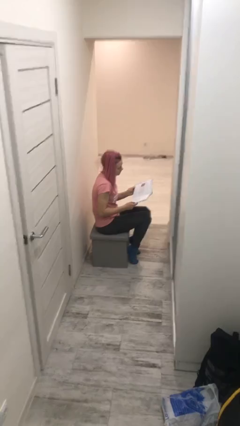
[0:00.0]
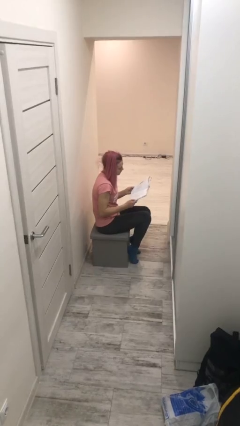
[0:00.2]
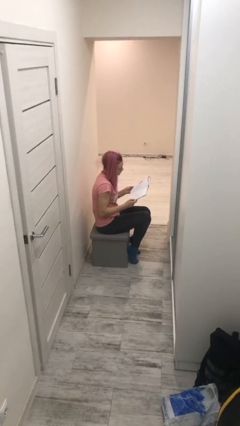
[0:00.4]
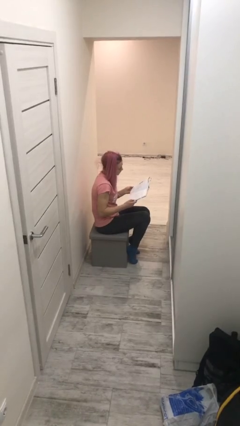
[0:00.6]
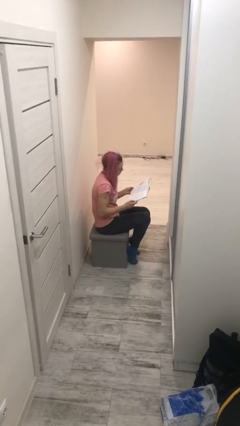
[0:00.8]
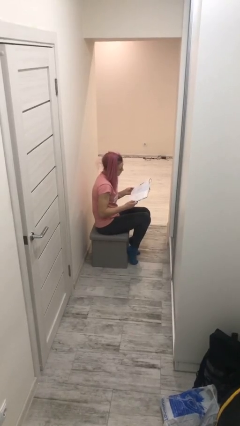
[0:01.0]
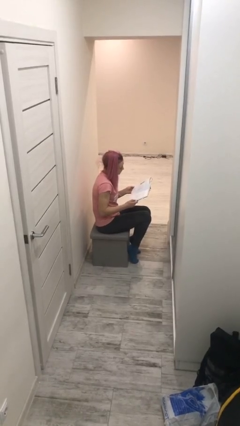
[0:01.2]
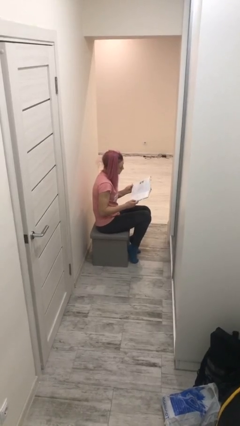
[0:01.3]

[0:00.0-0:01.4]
person reads document

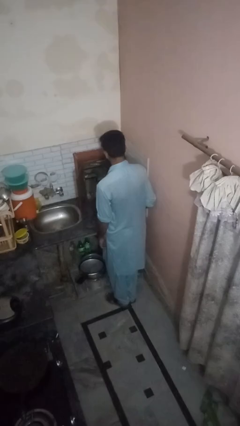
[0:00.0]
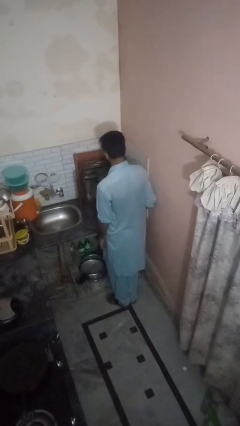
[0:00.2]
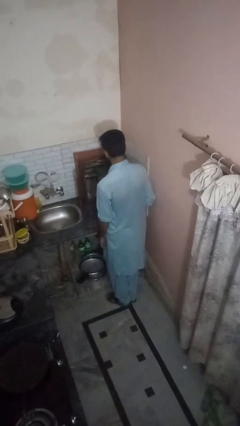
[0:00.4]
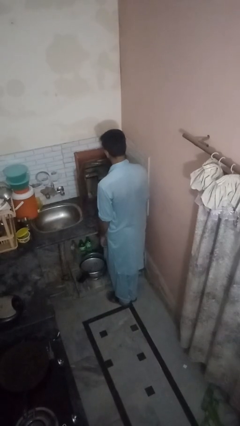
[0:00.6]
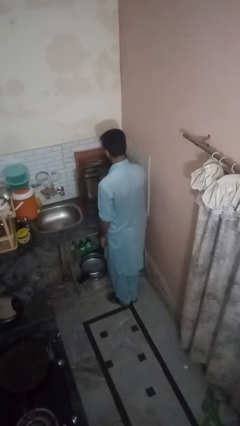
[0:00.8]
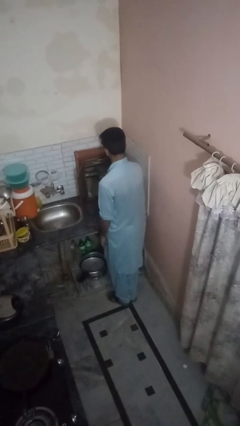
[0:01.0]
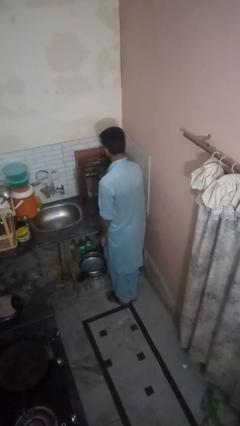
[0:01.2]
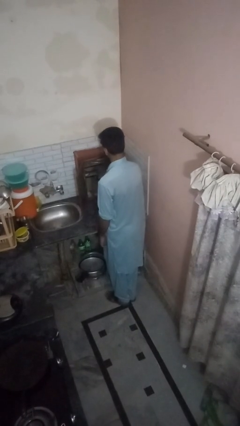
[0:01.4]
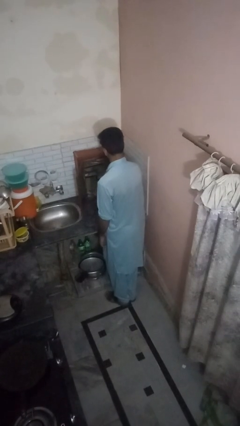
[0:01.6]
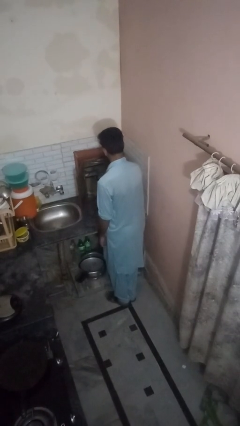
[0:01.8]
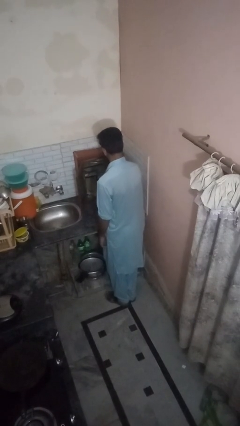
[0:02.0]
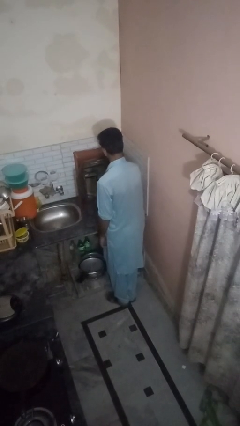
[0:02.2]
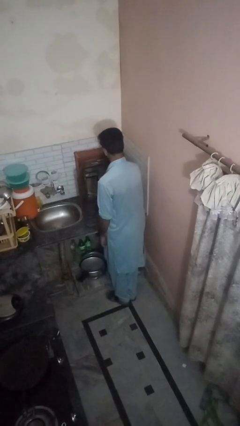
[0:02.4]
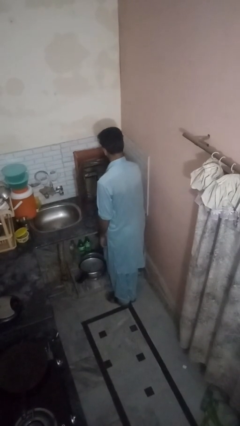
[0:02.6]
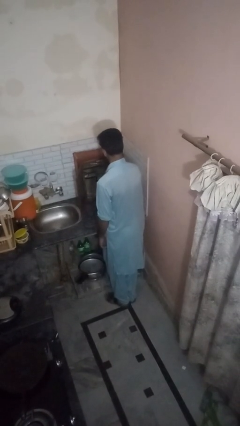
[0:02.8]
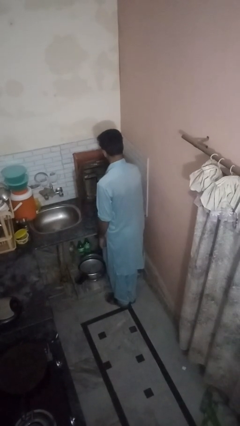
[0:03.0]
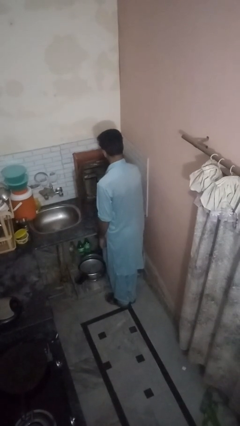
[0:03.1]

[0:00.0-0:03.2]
person searches in kitchen drawer

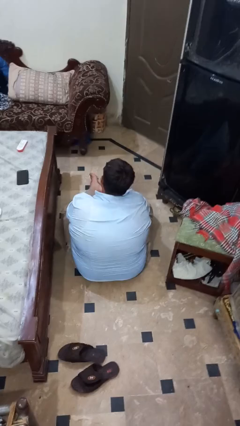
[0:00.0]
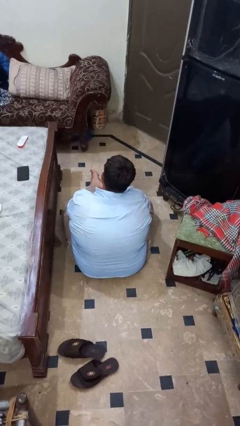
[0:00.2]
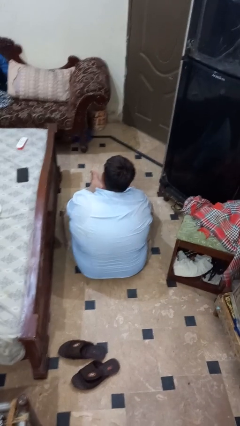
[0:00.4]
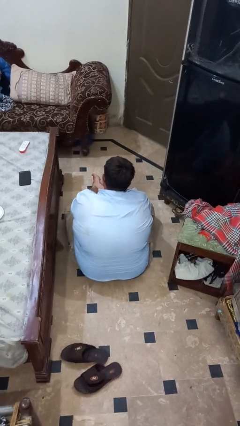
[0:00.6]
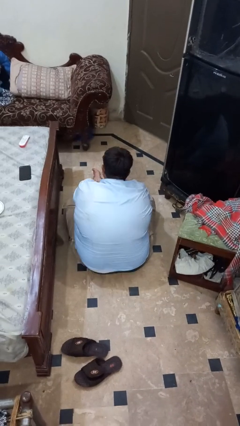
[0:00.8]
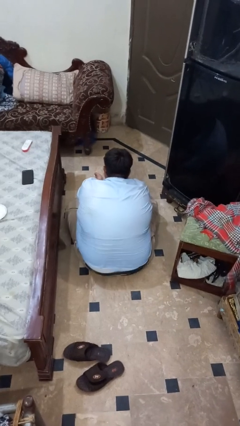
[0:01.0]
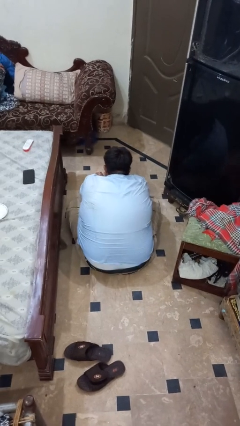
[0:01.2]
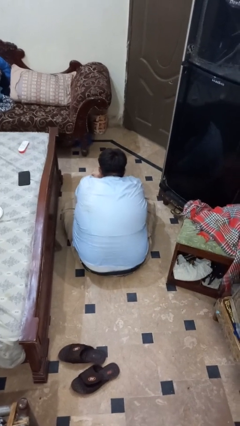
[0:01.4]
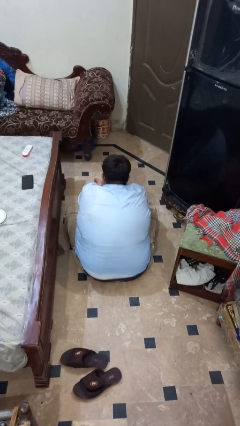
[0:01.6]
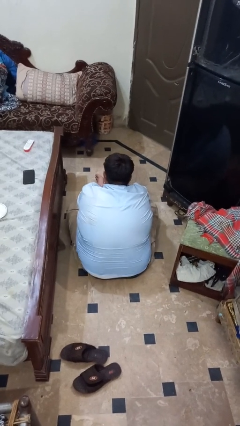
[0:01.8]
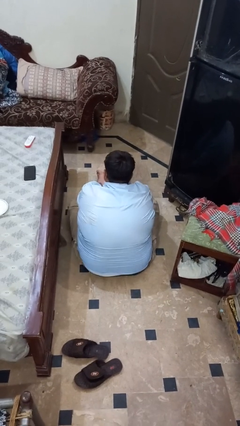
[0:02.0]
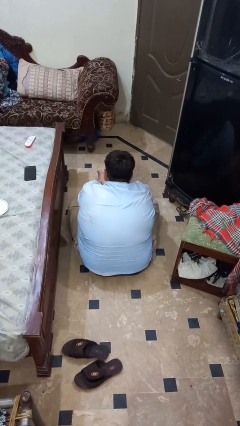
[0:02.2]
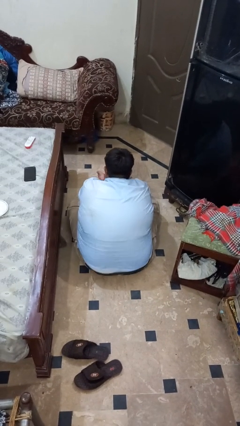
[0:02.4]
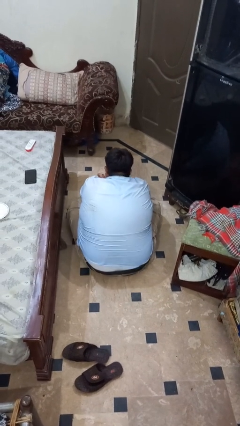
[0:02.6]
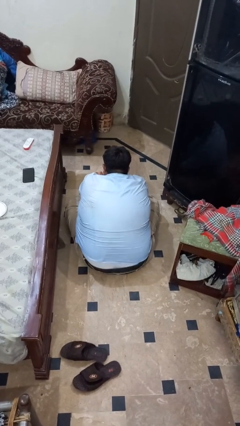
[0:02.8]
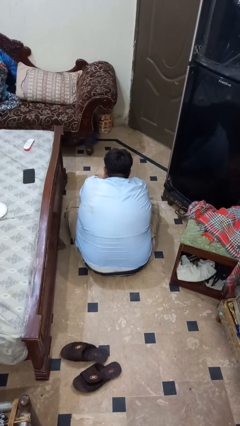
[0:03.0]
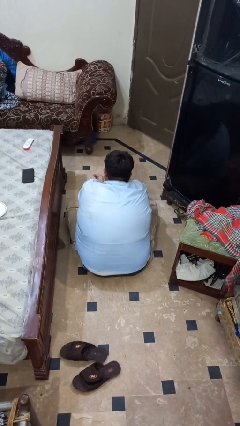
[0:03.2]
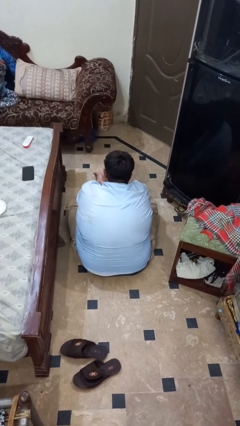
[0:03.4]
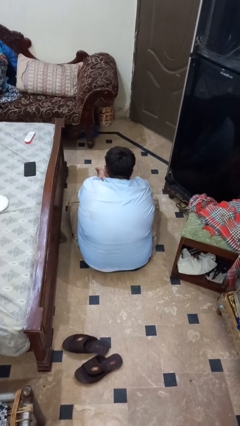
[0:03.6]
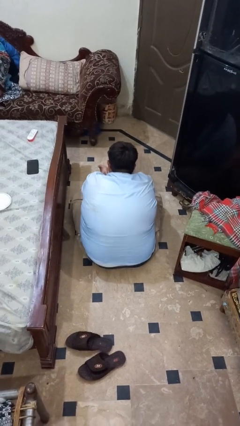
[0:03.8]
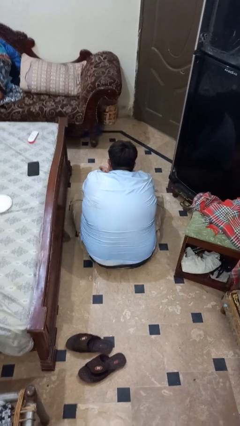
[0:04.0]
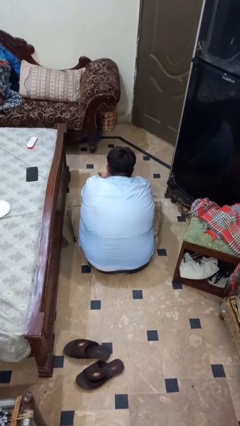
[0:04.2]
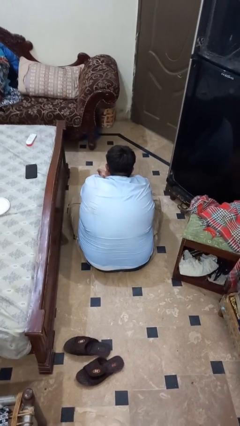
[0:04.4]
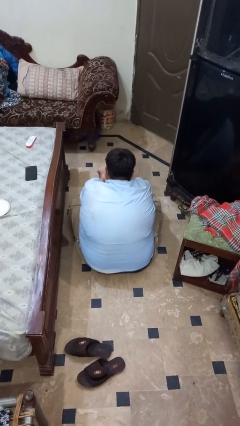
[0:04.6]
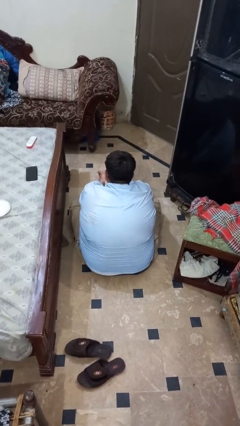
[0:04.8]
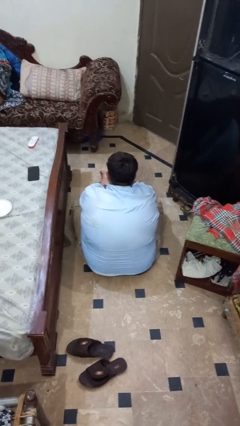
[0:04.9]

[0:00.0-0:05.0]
person rubs foot

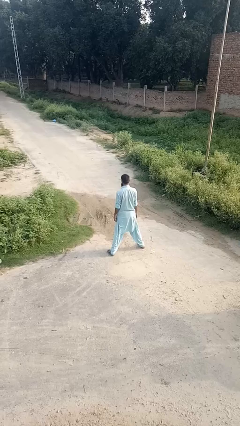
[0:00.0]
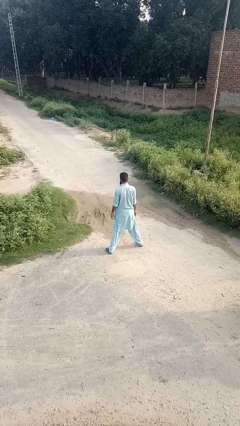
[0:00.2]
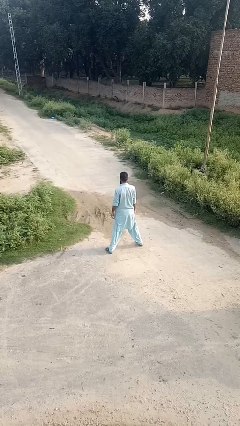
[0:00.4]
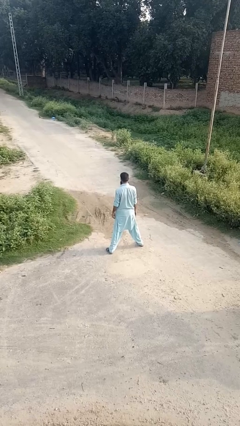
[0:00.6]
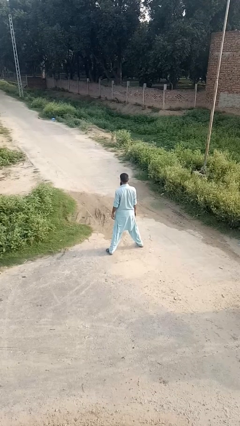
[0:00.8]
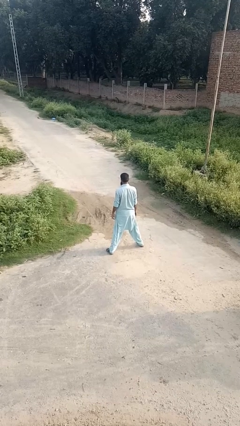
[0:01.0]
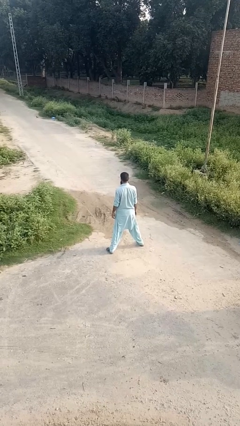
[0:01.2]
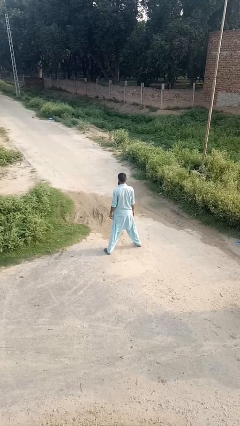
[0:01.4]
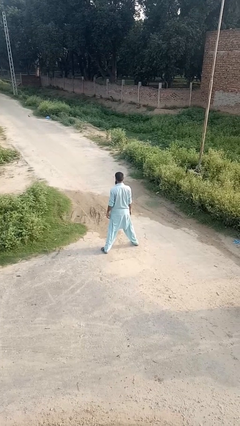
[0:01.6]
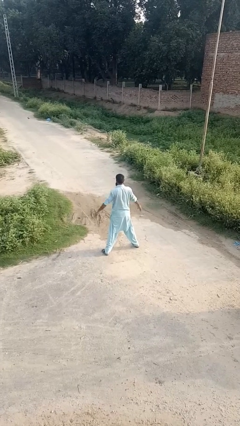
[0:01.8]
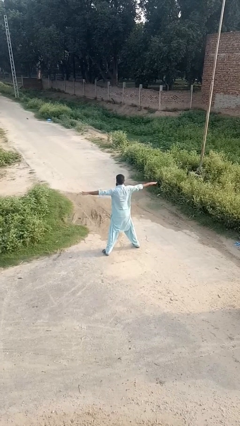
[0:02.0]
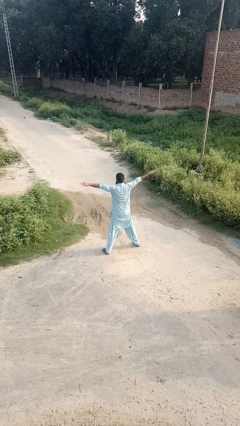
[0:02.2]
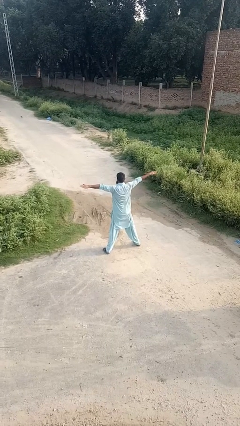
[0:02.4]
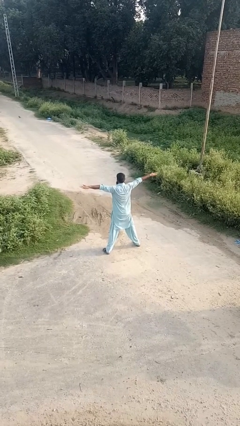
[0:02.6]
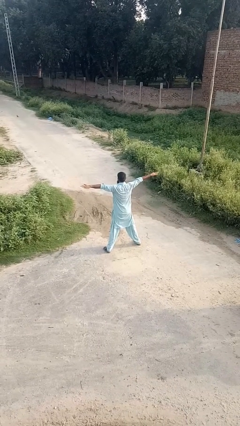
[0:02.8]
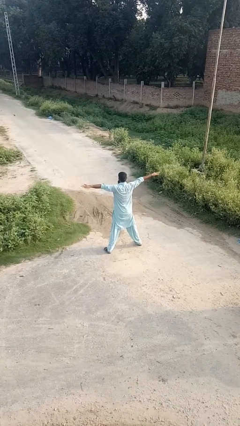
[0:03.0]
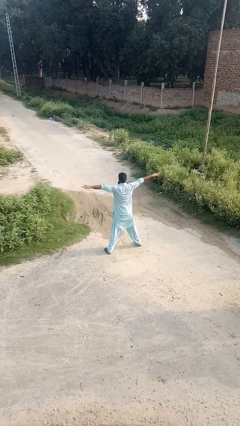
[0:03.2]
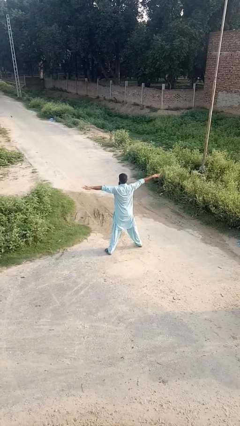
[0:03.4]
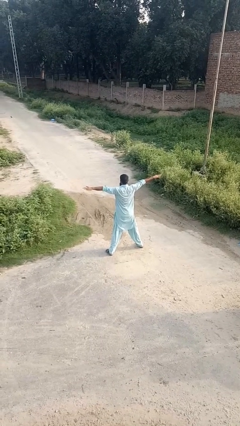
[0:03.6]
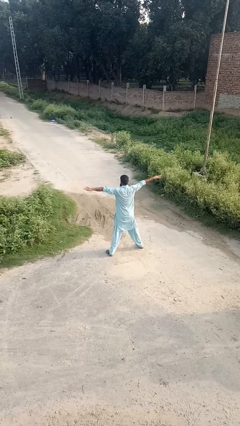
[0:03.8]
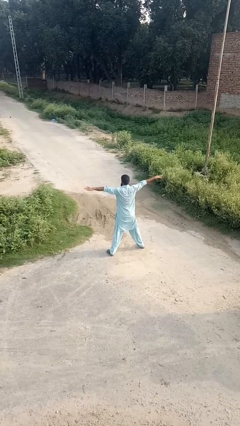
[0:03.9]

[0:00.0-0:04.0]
person stretches arms to side

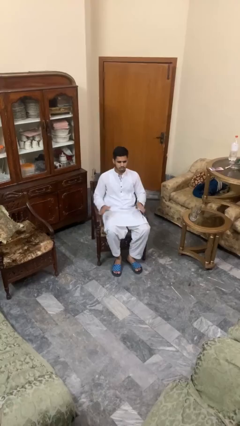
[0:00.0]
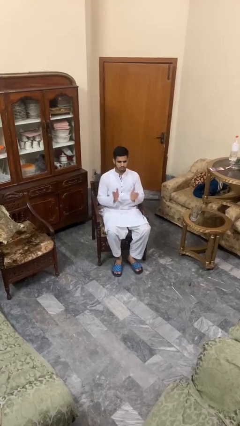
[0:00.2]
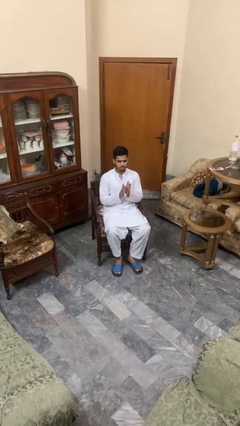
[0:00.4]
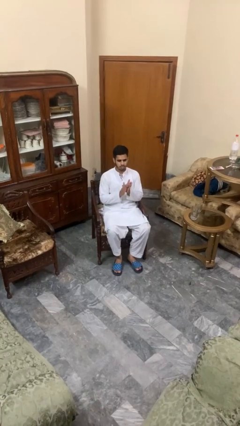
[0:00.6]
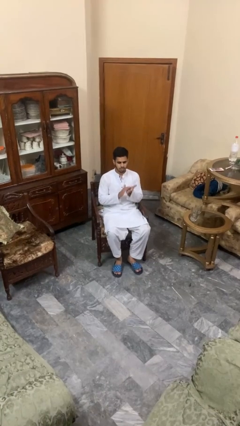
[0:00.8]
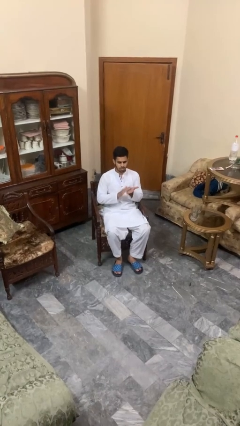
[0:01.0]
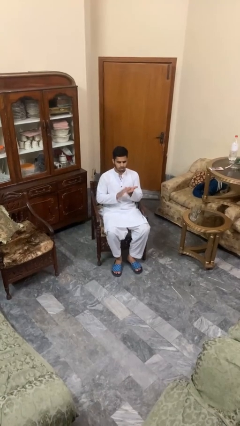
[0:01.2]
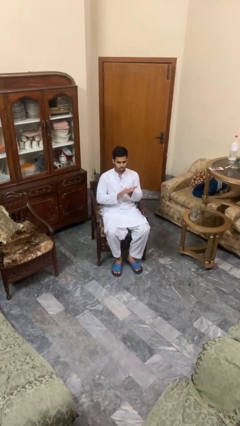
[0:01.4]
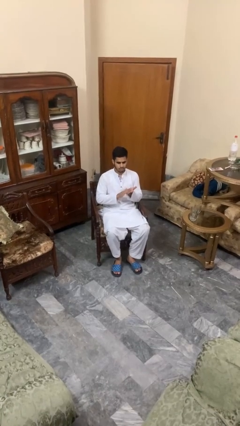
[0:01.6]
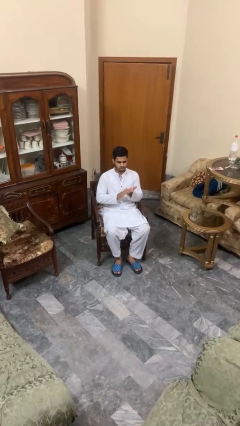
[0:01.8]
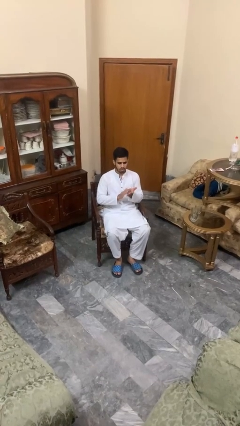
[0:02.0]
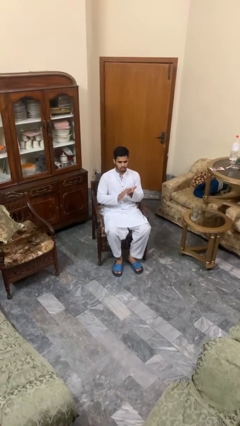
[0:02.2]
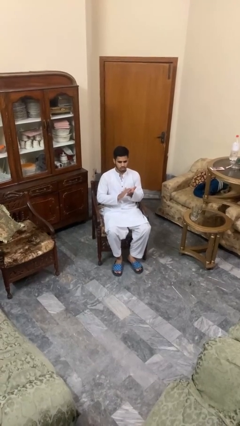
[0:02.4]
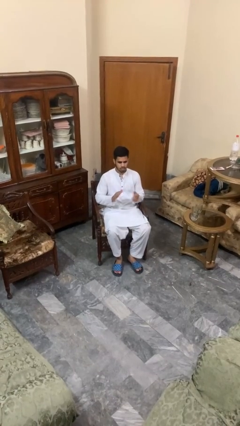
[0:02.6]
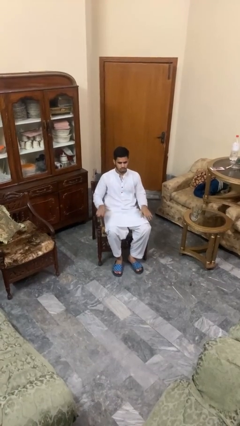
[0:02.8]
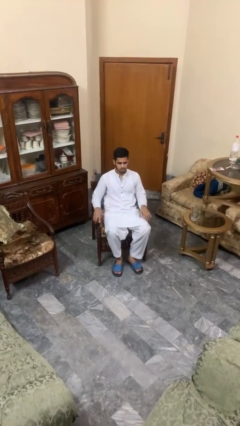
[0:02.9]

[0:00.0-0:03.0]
person claps hands

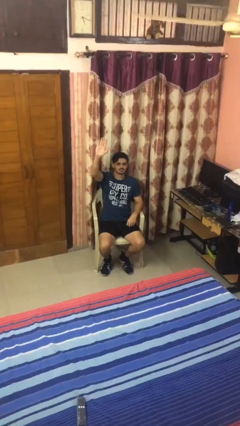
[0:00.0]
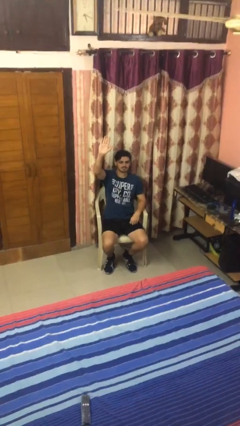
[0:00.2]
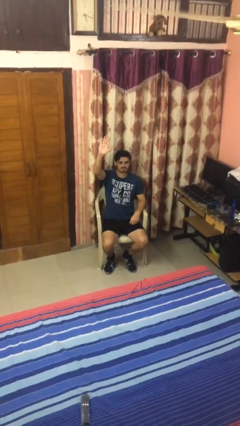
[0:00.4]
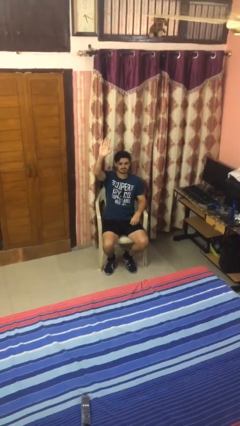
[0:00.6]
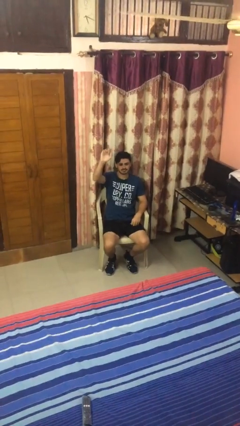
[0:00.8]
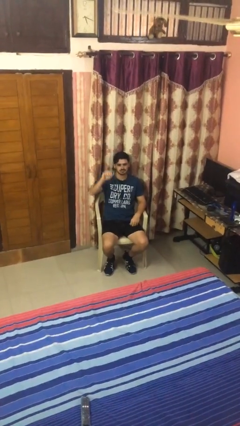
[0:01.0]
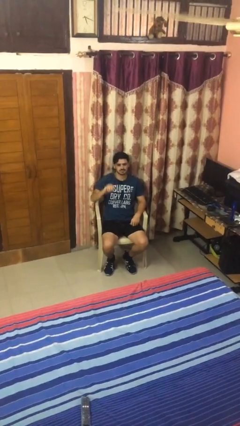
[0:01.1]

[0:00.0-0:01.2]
person gestures lower hand
